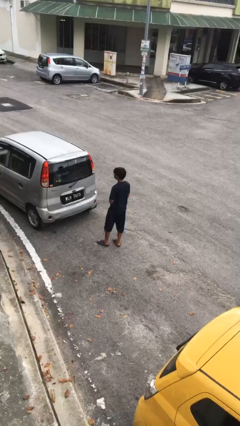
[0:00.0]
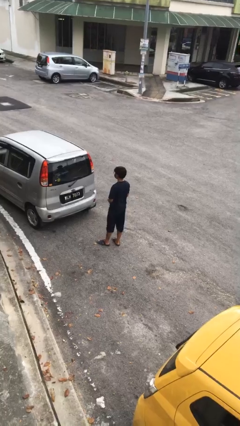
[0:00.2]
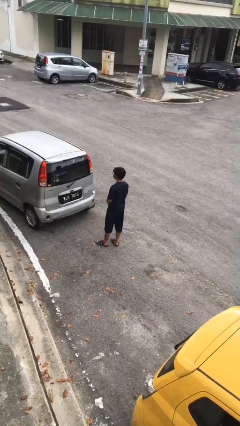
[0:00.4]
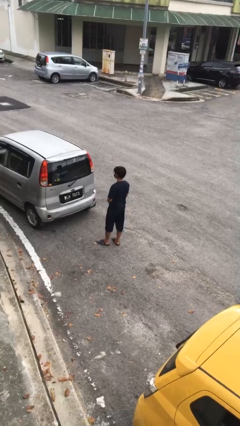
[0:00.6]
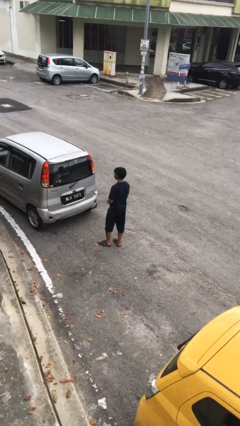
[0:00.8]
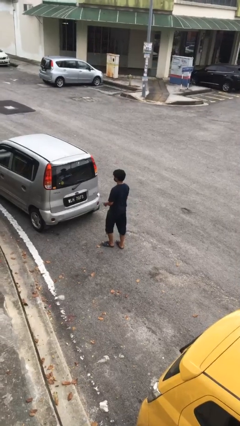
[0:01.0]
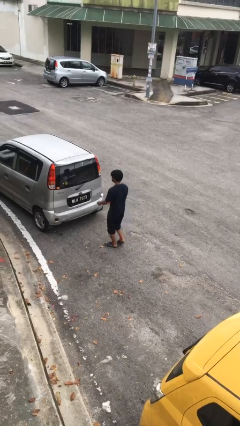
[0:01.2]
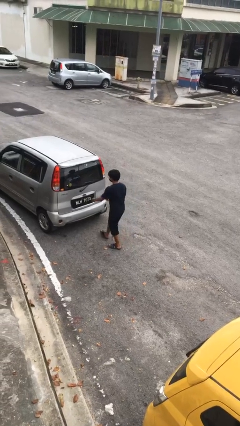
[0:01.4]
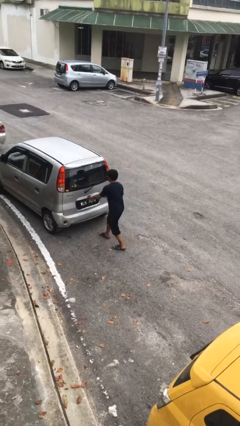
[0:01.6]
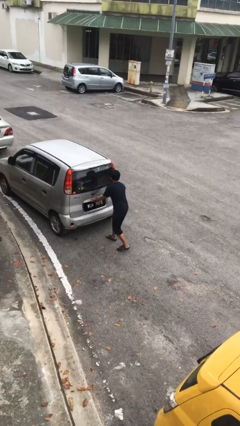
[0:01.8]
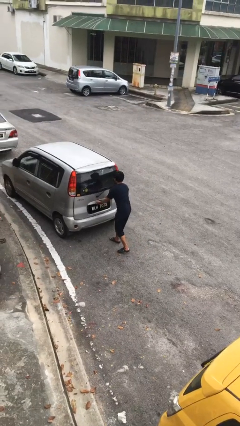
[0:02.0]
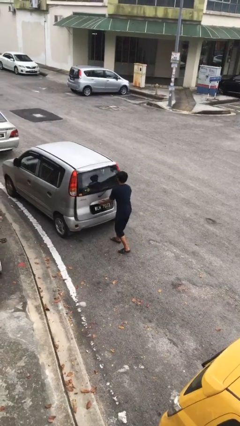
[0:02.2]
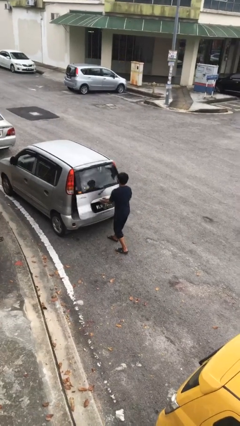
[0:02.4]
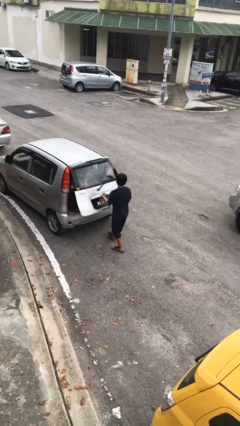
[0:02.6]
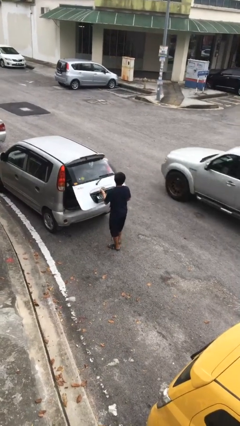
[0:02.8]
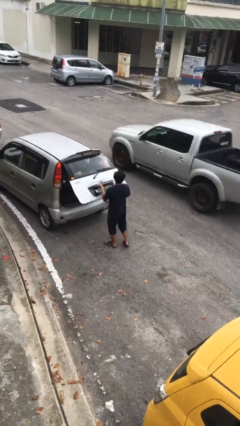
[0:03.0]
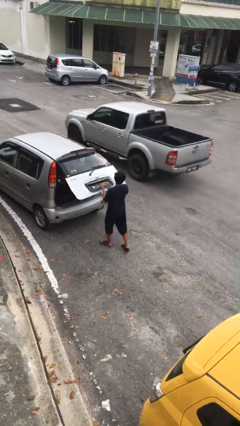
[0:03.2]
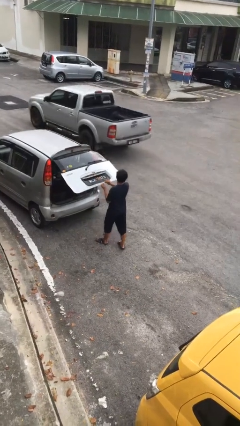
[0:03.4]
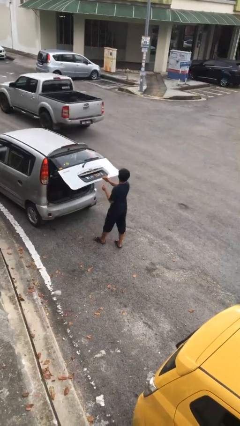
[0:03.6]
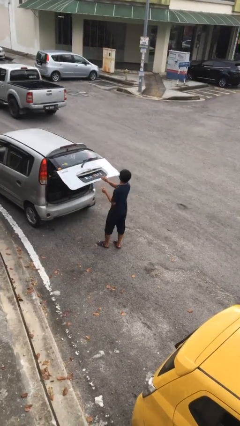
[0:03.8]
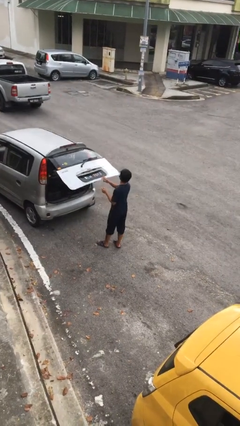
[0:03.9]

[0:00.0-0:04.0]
person opens car trunk

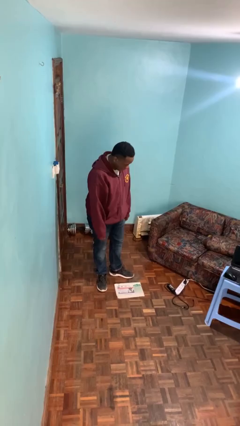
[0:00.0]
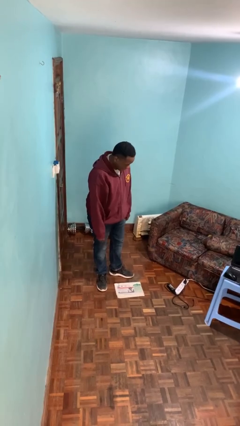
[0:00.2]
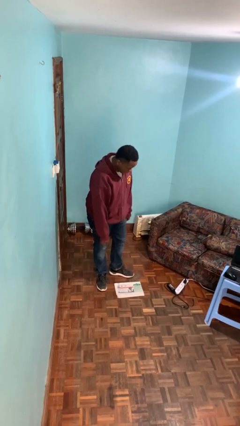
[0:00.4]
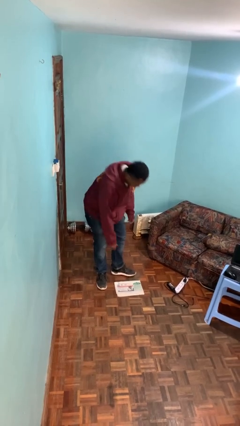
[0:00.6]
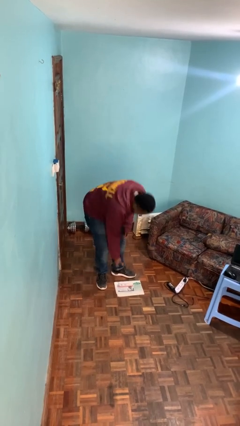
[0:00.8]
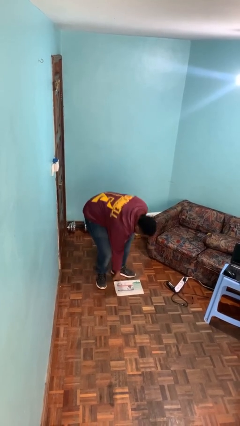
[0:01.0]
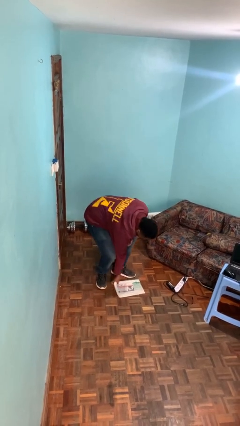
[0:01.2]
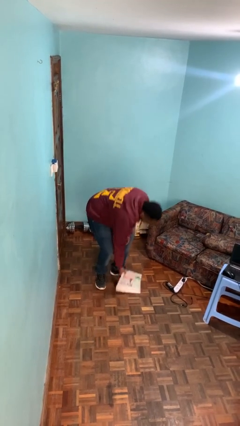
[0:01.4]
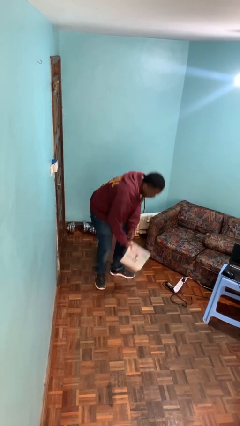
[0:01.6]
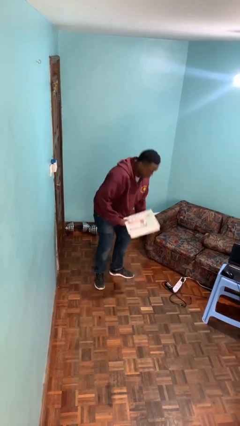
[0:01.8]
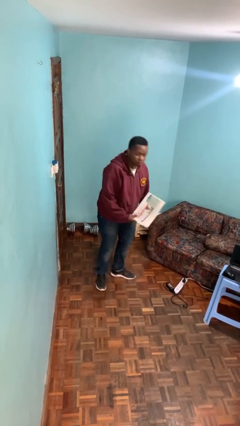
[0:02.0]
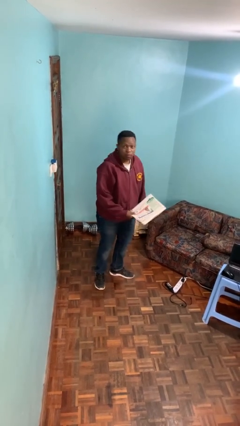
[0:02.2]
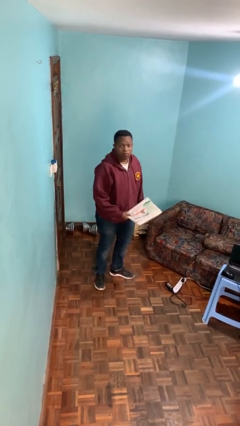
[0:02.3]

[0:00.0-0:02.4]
person picks up object from floor

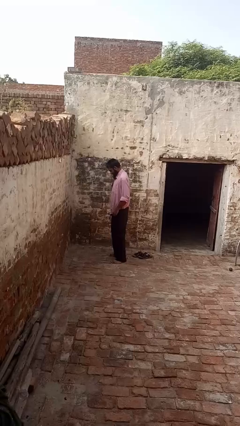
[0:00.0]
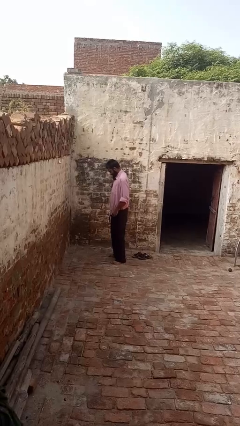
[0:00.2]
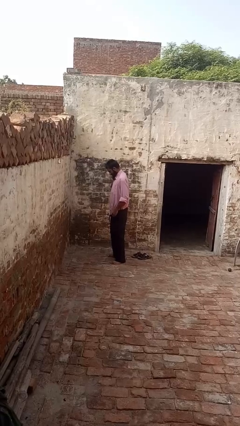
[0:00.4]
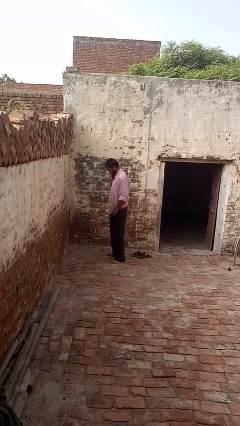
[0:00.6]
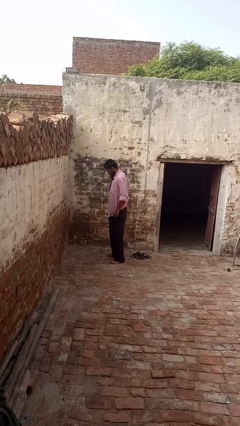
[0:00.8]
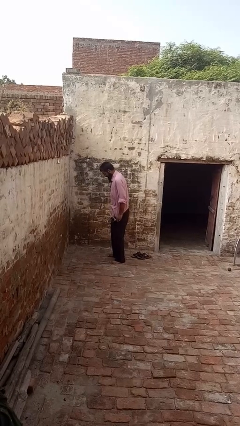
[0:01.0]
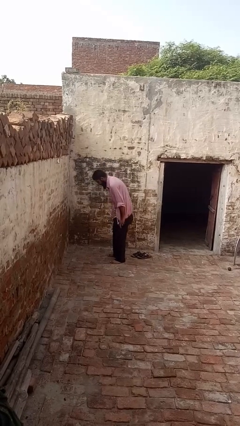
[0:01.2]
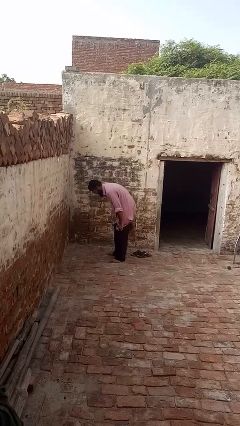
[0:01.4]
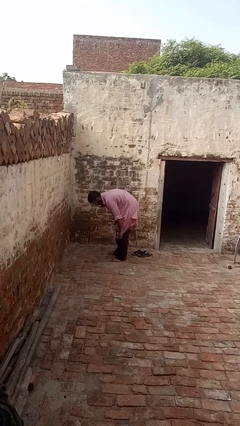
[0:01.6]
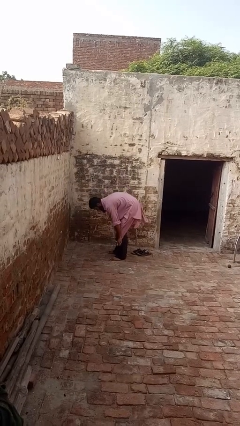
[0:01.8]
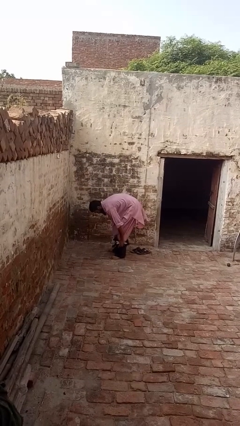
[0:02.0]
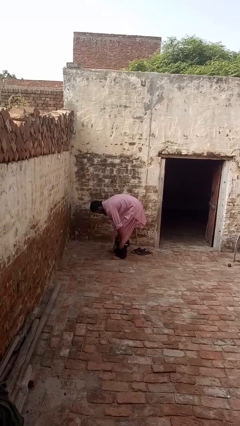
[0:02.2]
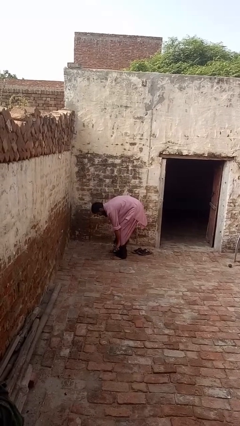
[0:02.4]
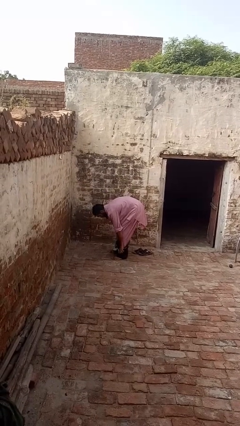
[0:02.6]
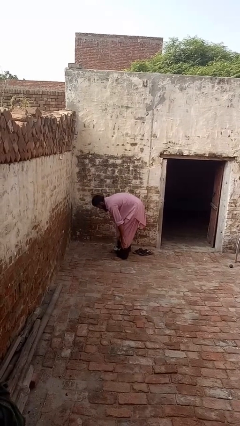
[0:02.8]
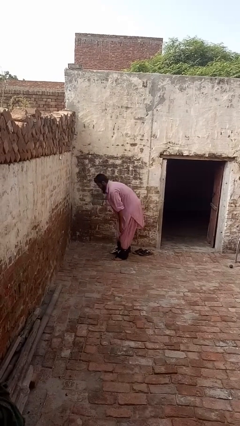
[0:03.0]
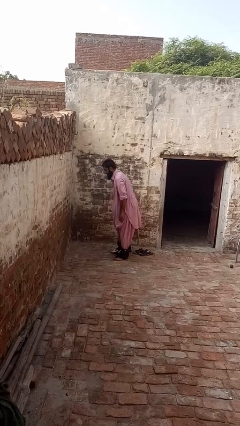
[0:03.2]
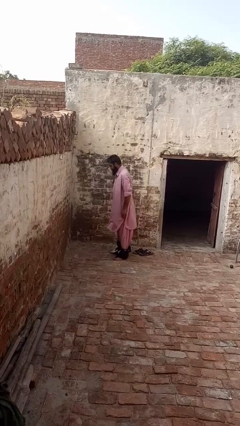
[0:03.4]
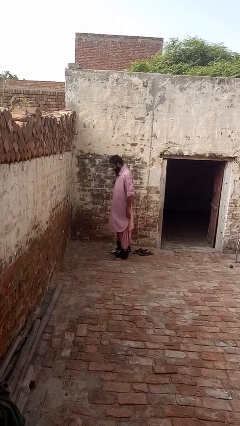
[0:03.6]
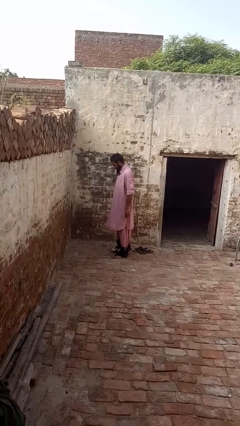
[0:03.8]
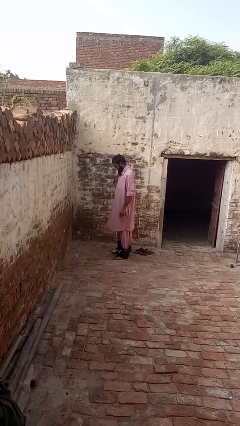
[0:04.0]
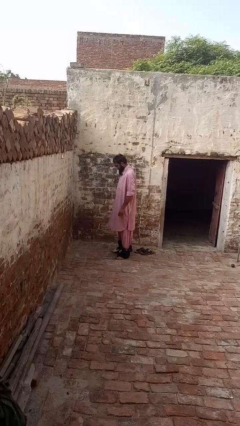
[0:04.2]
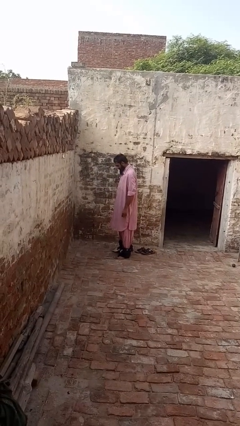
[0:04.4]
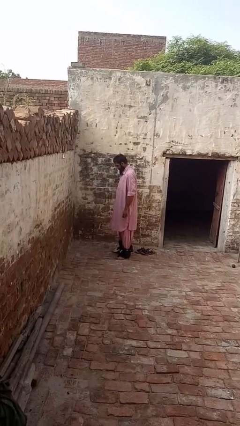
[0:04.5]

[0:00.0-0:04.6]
person takes off pants

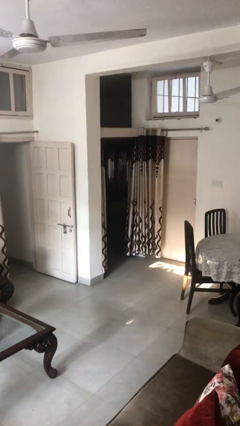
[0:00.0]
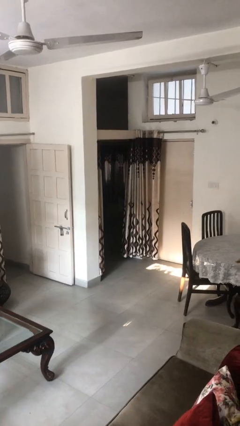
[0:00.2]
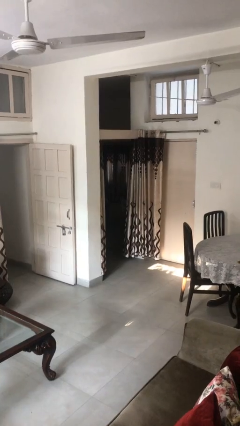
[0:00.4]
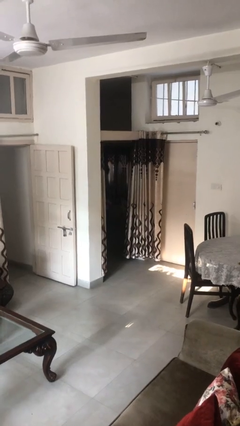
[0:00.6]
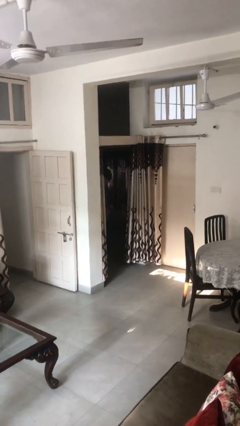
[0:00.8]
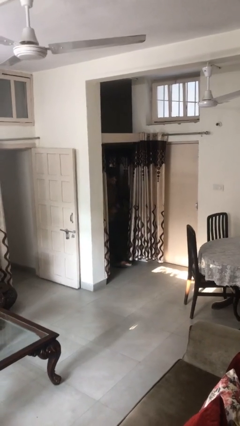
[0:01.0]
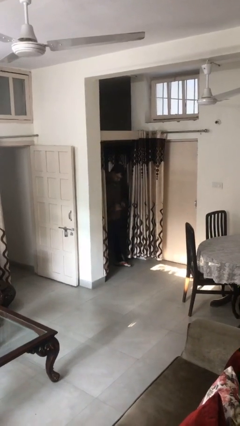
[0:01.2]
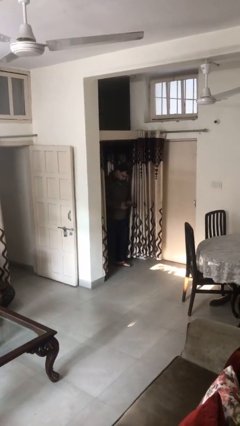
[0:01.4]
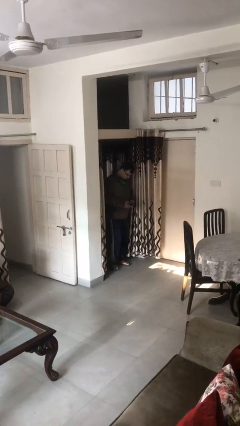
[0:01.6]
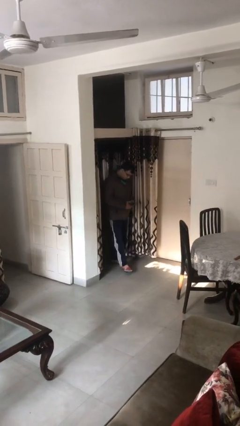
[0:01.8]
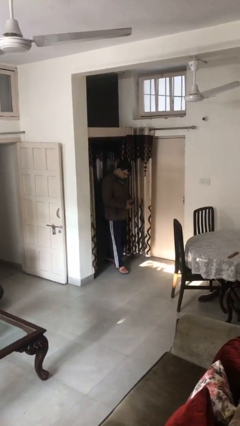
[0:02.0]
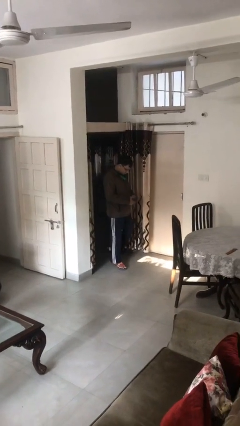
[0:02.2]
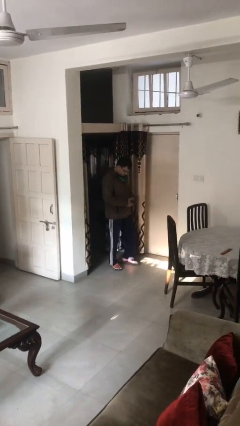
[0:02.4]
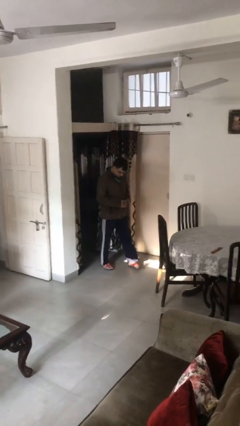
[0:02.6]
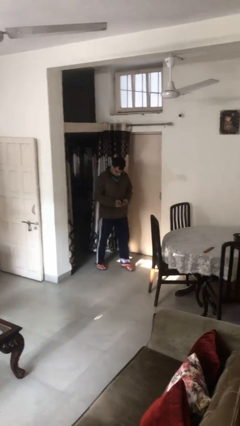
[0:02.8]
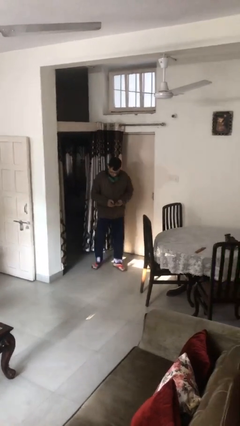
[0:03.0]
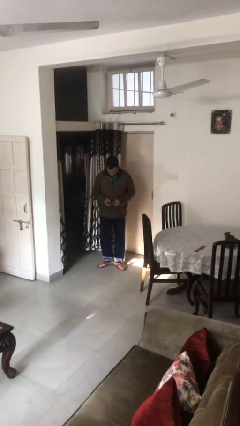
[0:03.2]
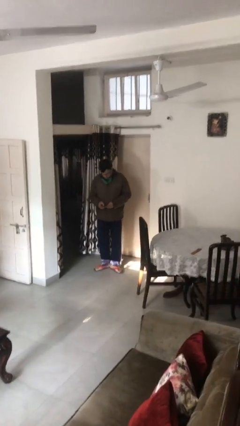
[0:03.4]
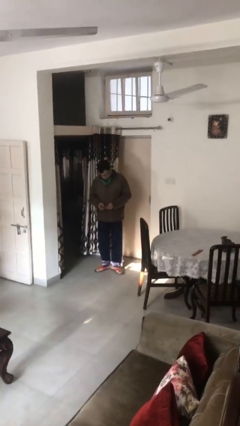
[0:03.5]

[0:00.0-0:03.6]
person enters scene through structure

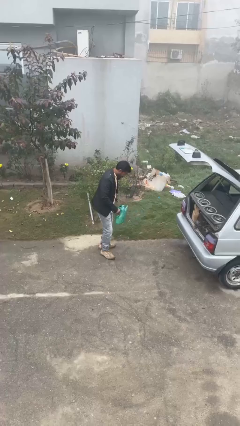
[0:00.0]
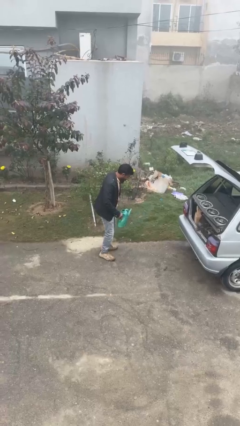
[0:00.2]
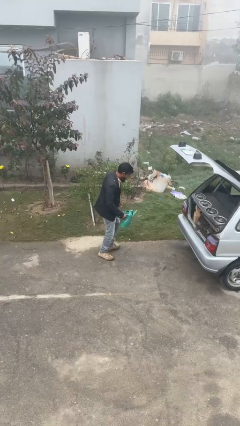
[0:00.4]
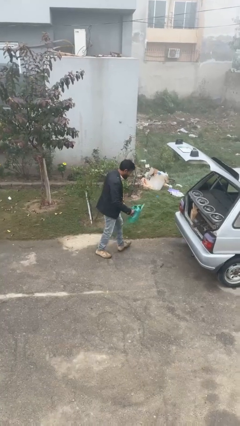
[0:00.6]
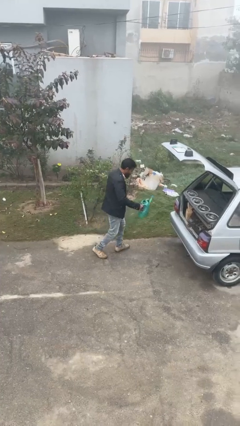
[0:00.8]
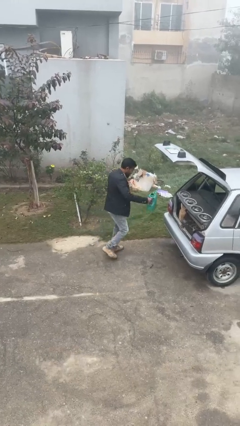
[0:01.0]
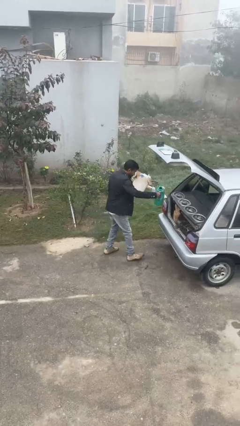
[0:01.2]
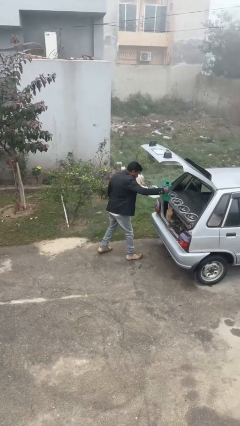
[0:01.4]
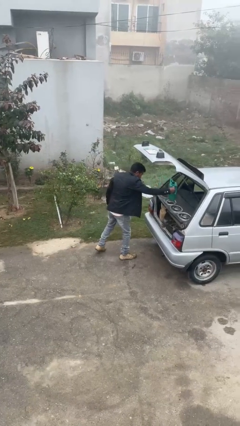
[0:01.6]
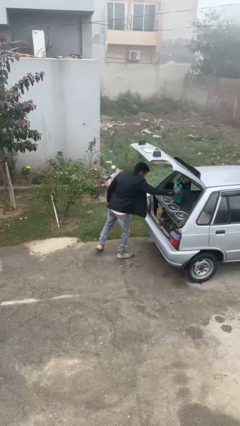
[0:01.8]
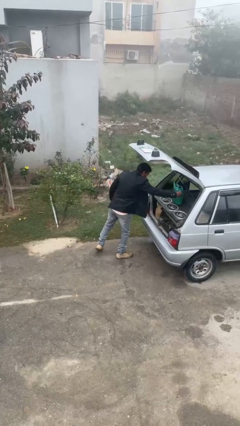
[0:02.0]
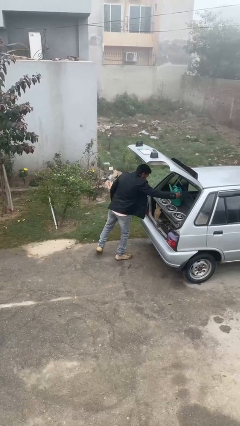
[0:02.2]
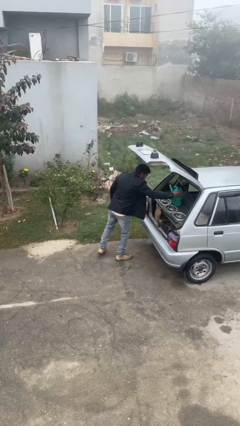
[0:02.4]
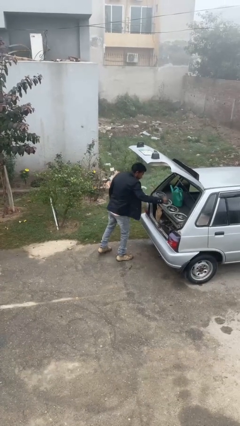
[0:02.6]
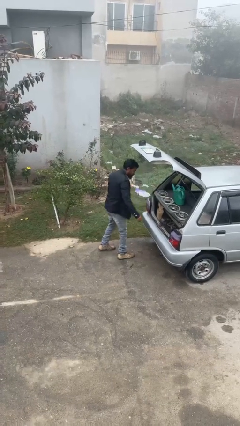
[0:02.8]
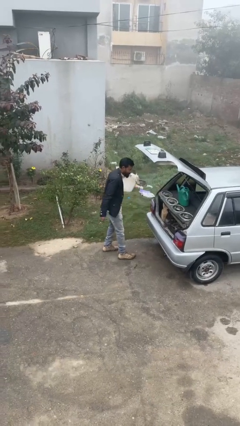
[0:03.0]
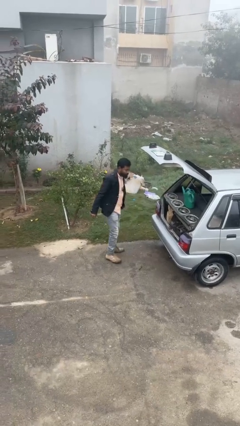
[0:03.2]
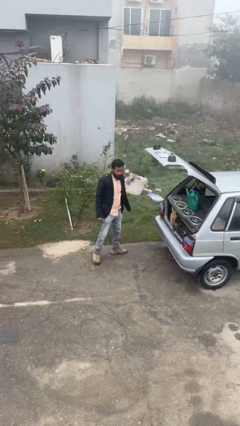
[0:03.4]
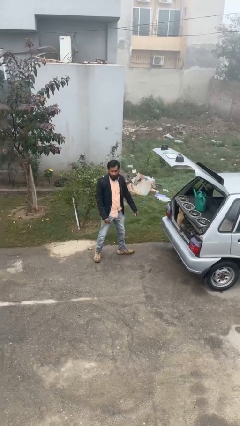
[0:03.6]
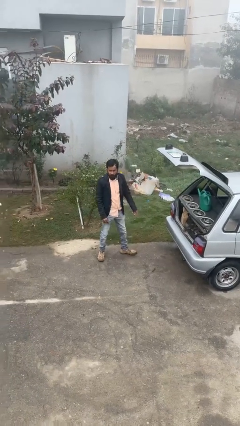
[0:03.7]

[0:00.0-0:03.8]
person loads car
